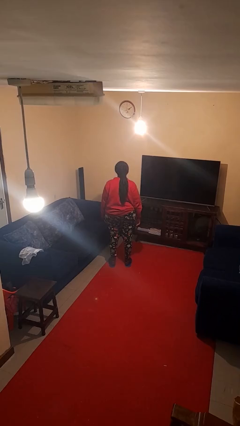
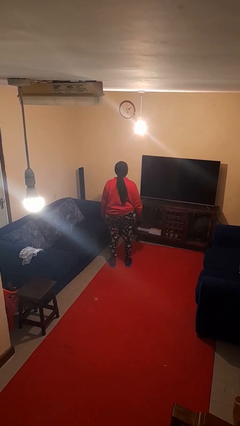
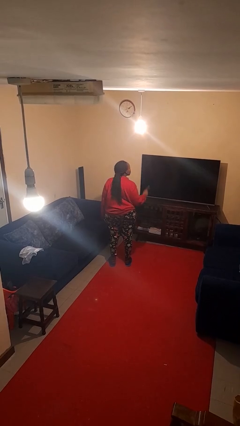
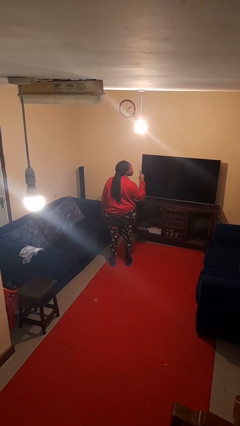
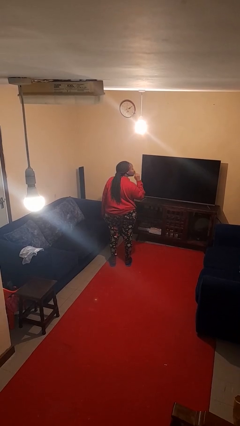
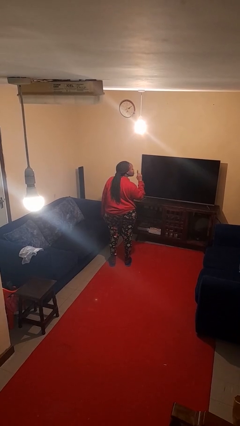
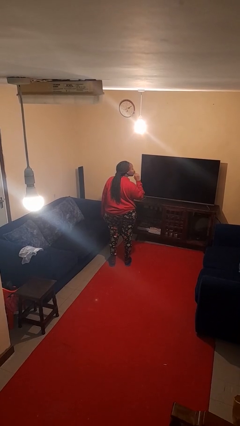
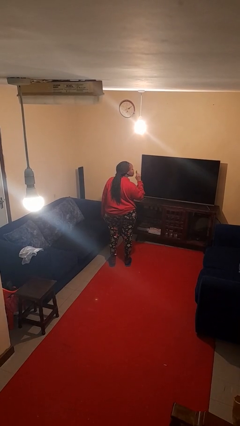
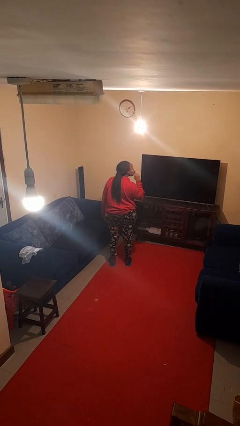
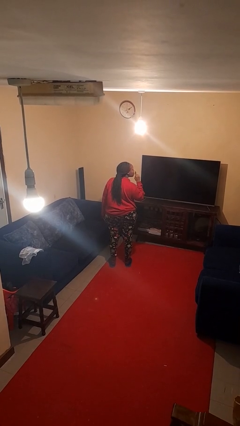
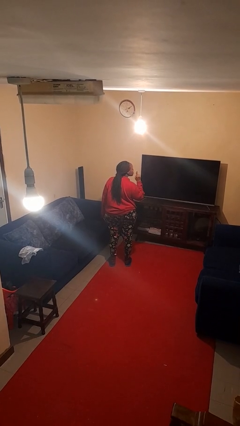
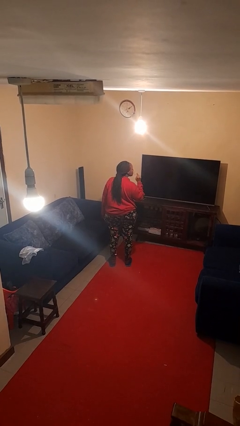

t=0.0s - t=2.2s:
person gestures be quiet

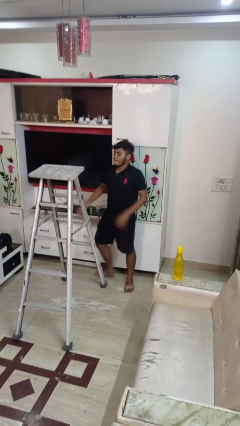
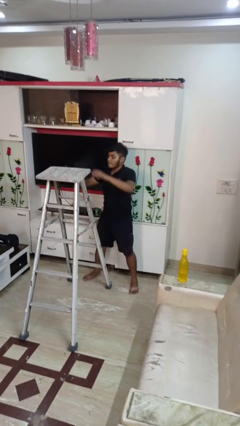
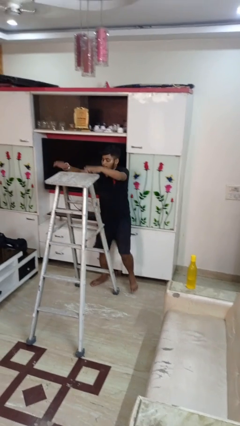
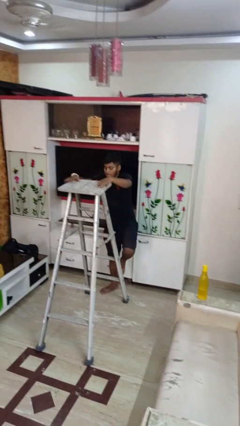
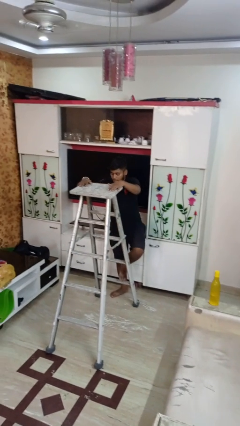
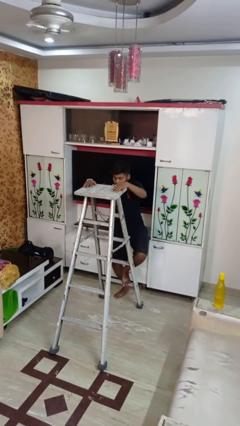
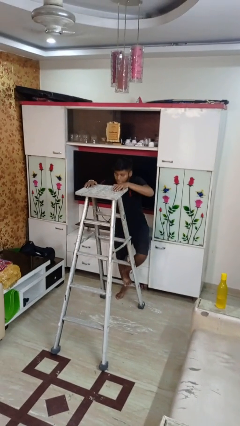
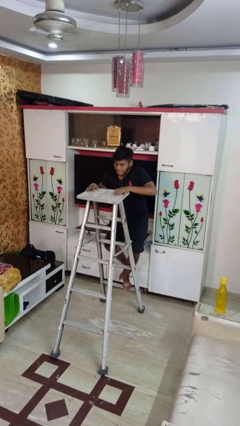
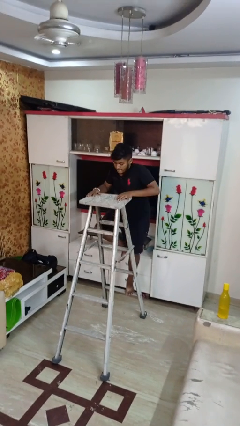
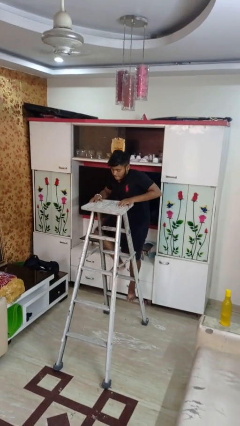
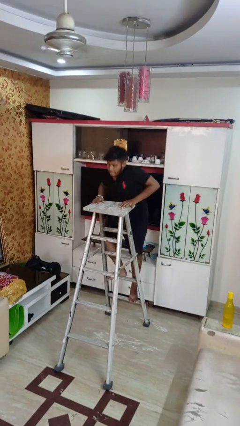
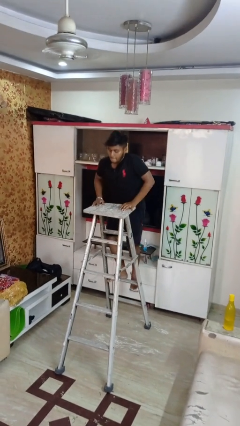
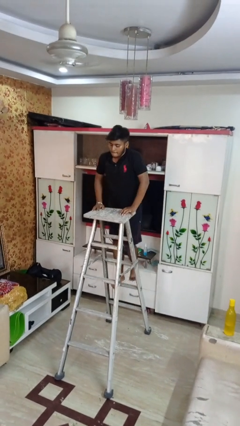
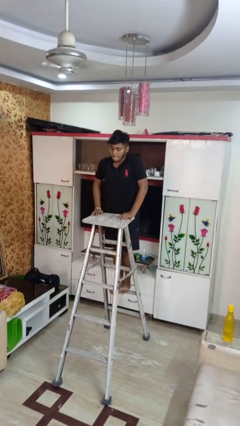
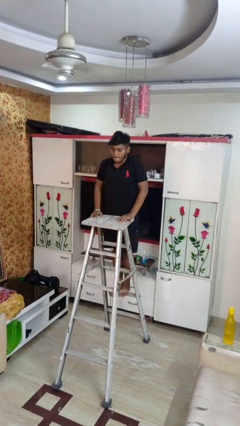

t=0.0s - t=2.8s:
person climbs up ladder

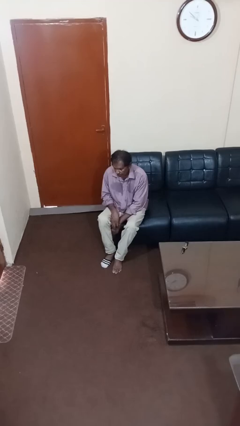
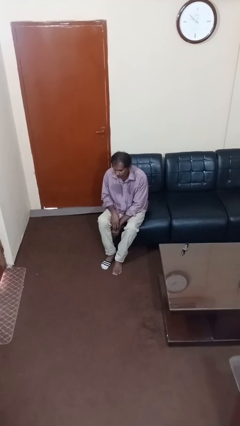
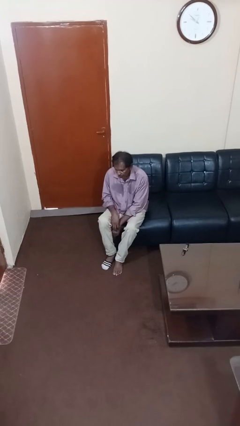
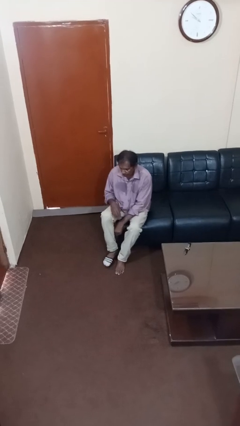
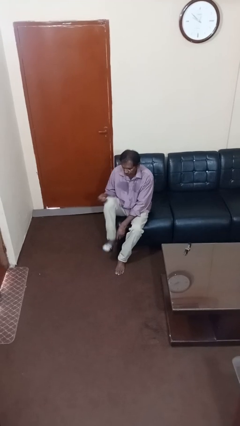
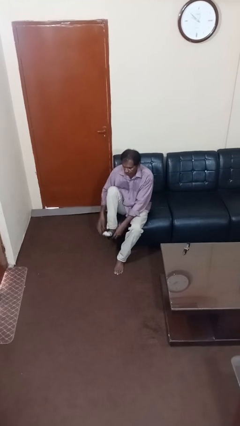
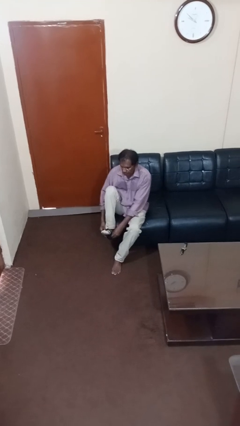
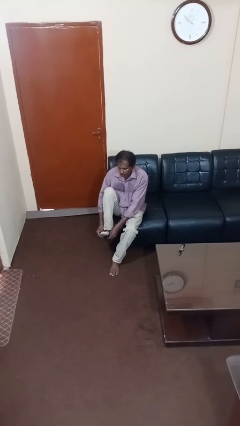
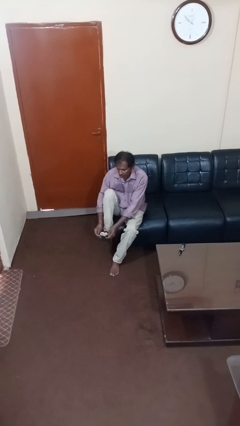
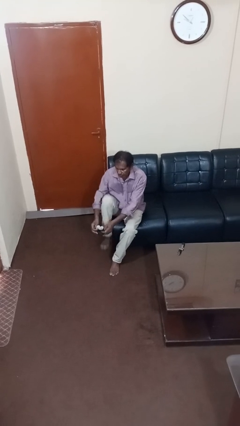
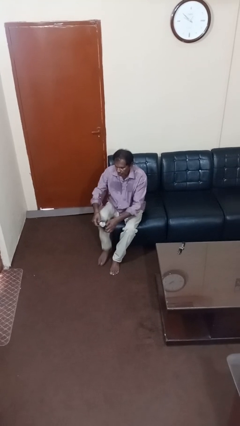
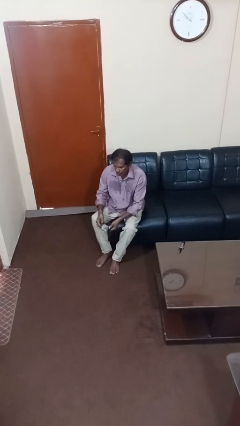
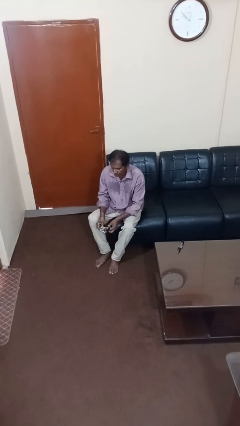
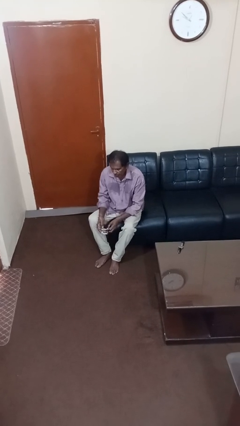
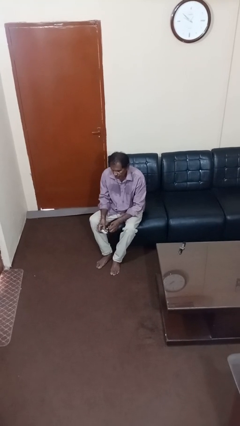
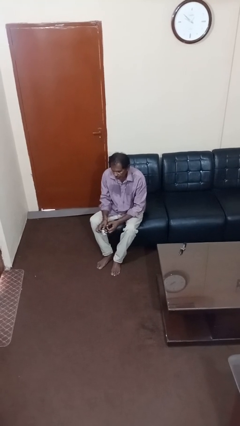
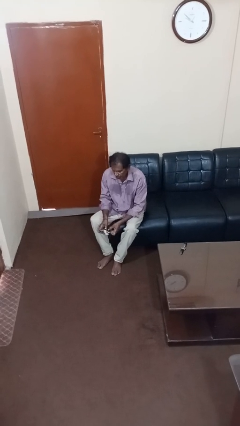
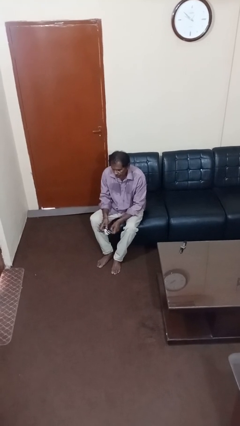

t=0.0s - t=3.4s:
person takes off socks

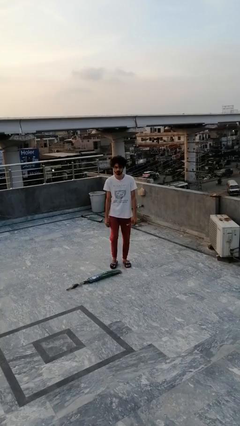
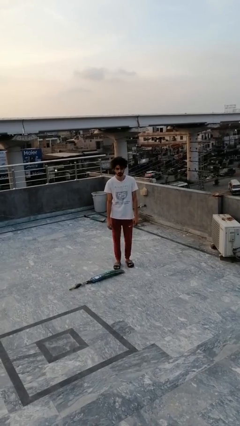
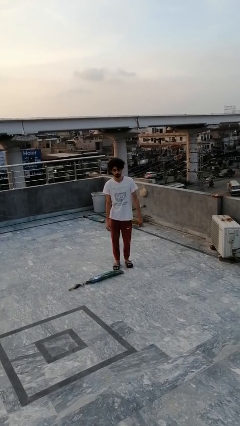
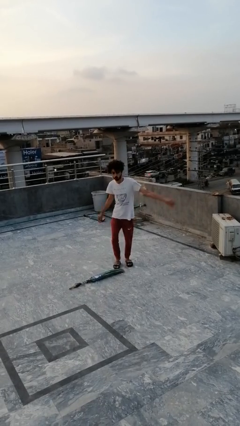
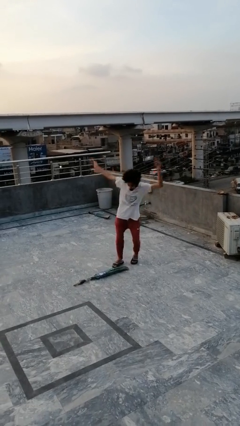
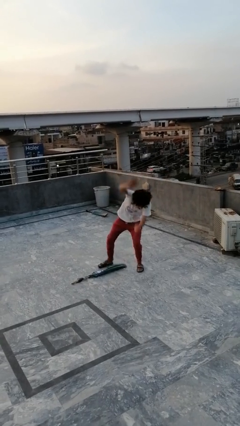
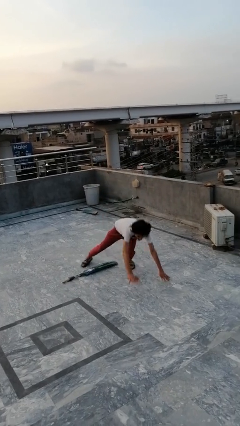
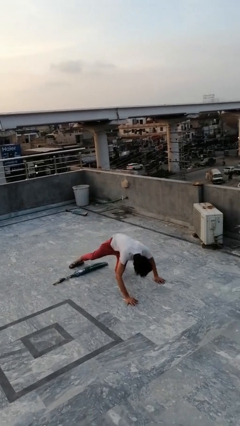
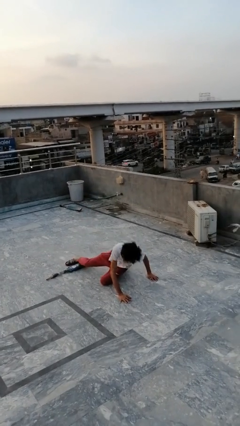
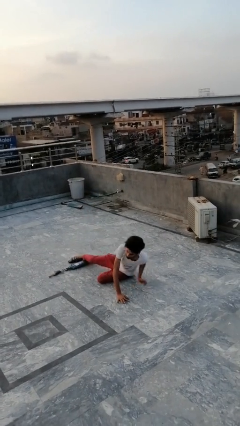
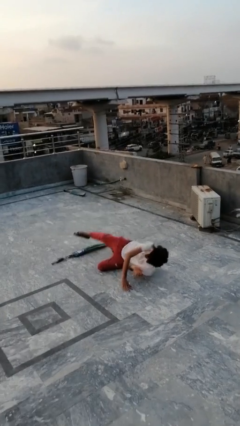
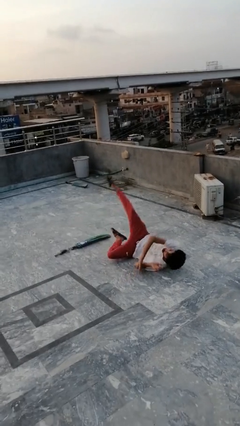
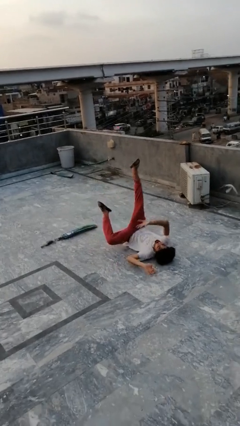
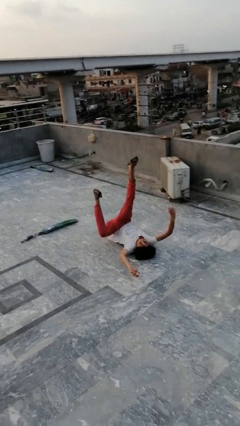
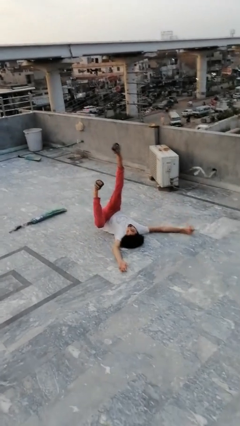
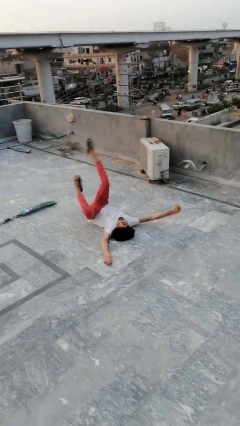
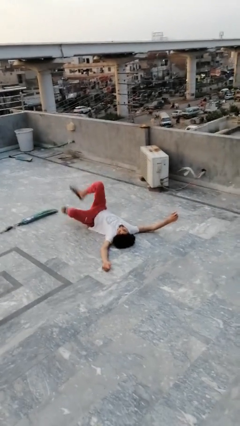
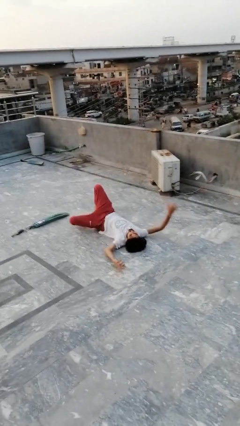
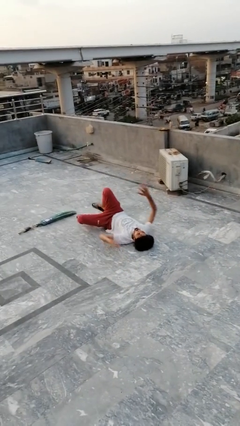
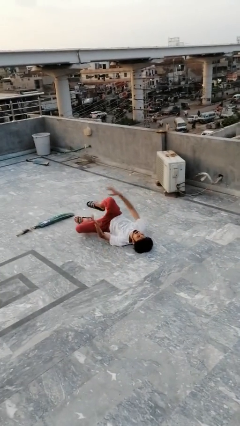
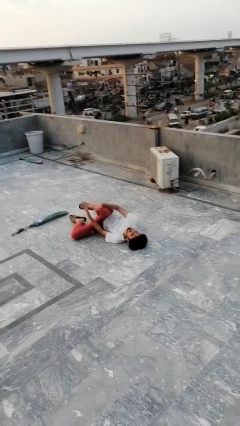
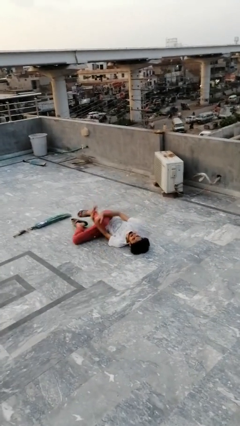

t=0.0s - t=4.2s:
person lies down on floor

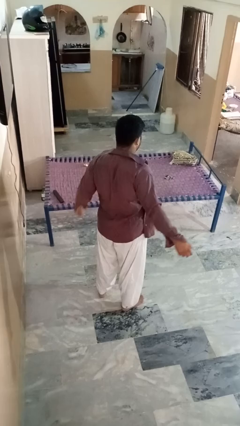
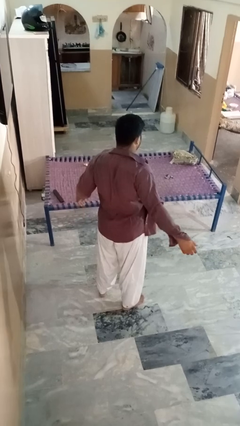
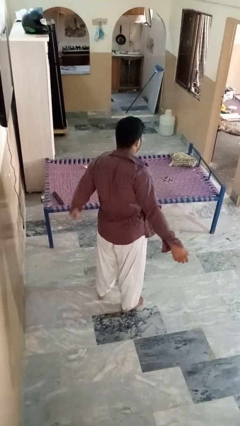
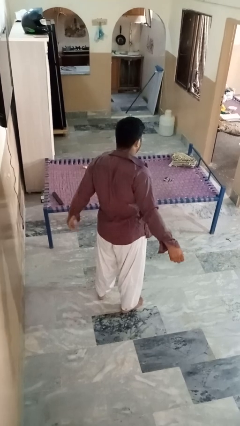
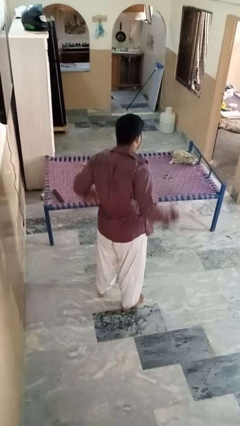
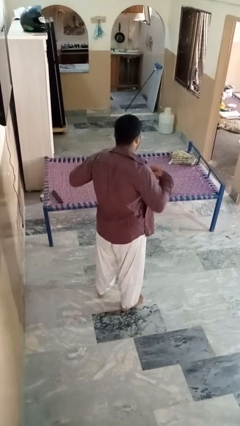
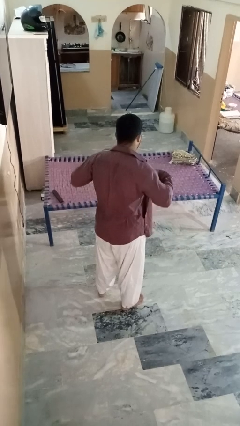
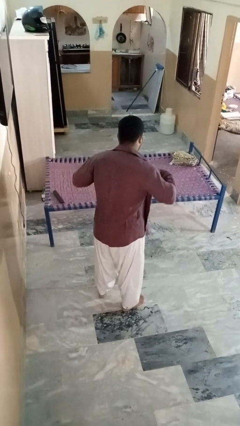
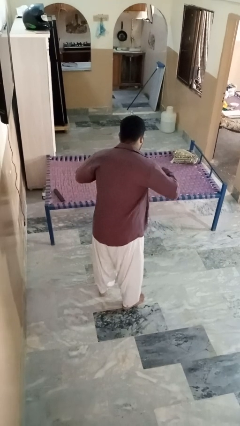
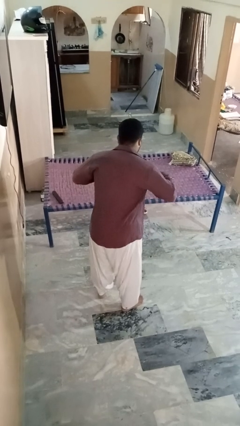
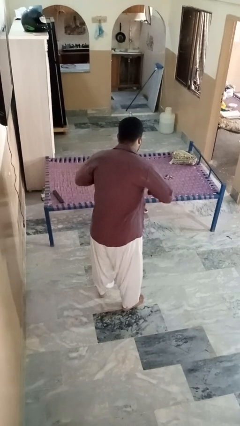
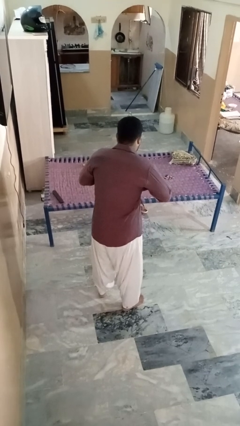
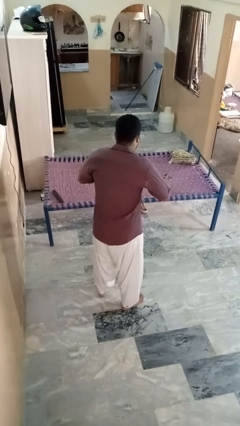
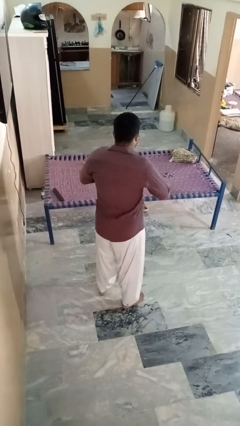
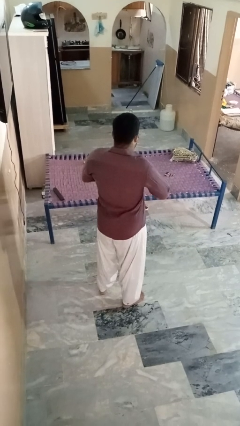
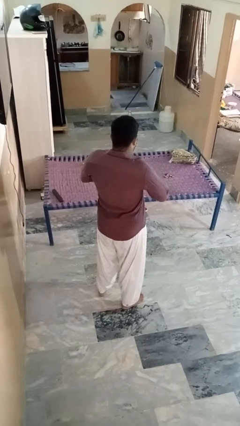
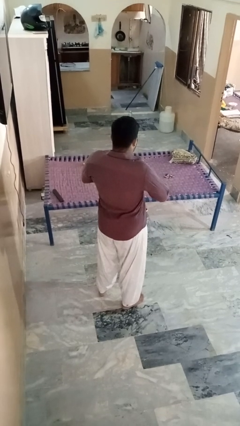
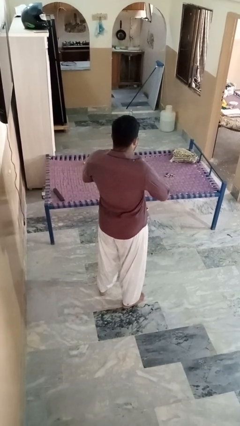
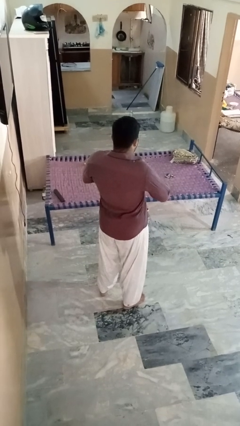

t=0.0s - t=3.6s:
person buttons shirt

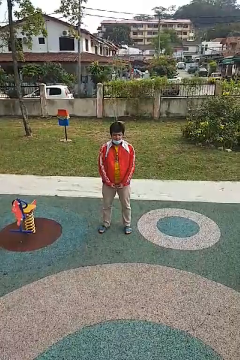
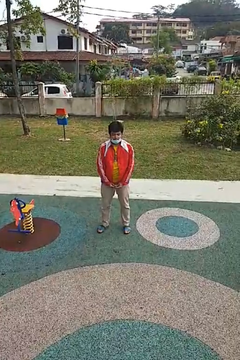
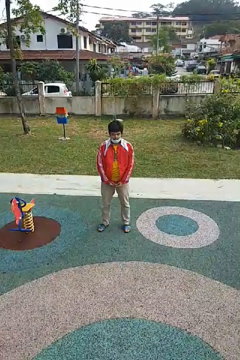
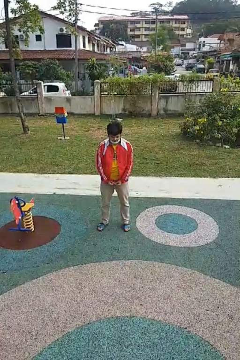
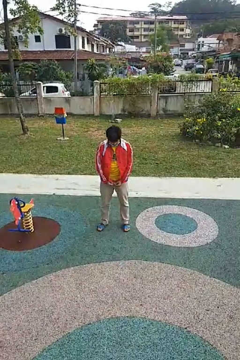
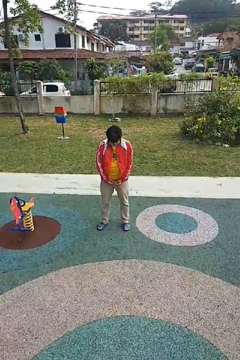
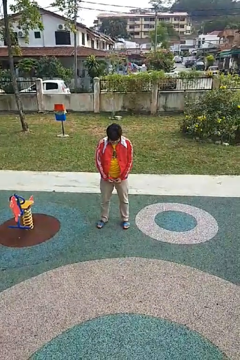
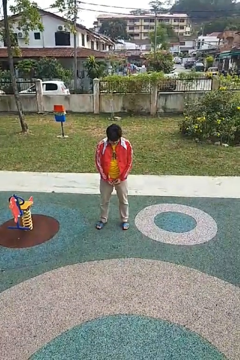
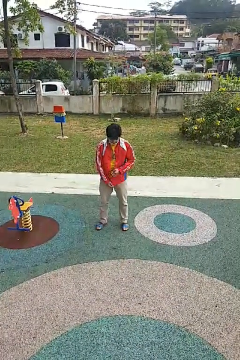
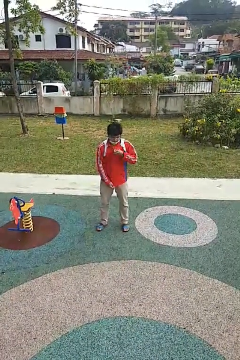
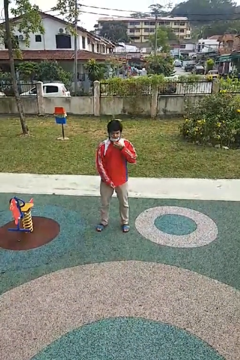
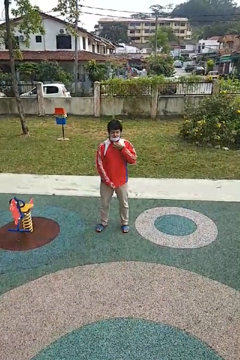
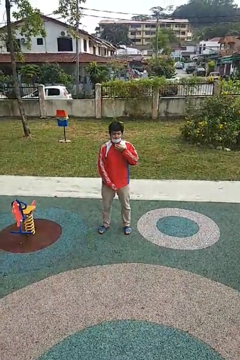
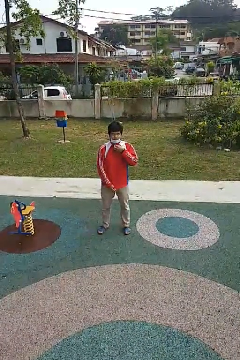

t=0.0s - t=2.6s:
person zips up jacket
